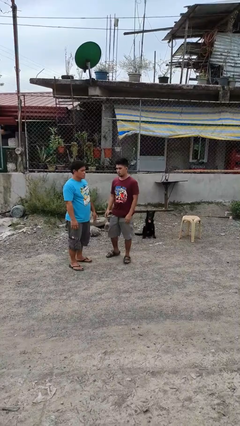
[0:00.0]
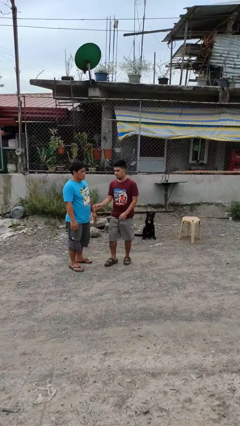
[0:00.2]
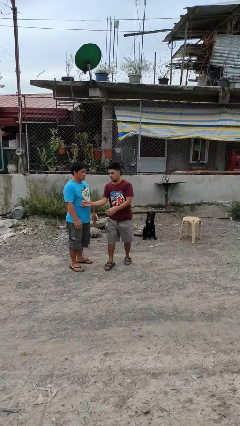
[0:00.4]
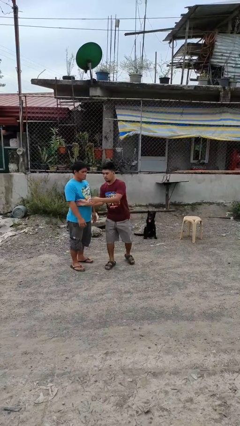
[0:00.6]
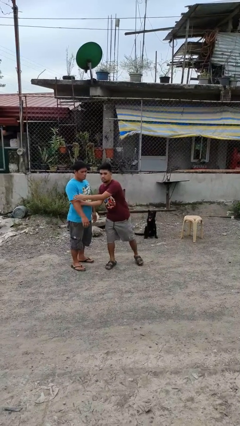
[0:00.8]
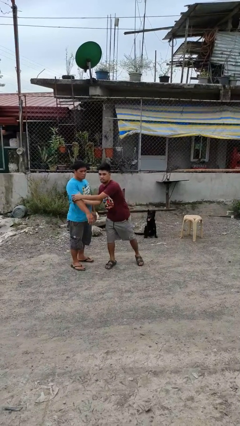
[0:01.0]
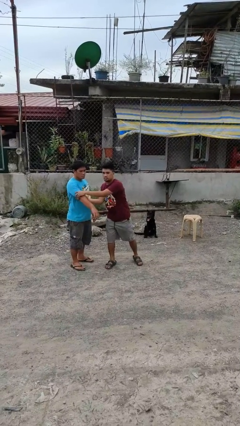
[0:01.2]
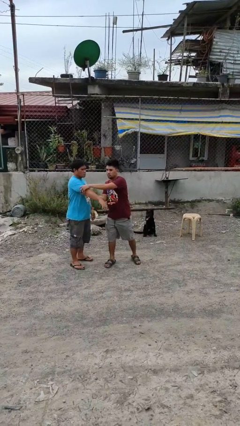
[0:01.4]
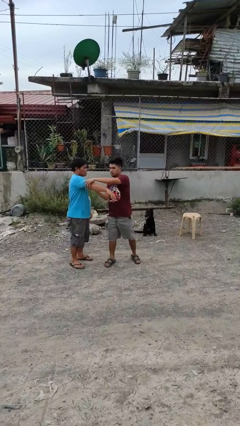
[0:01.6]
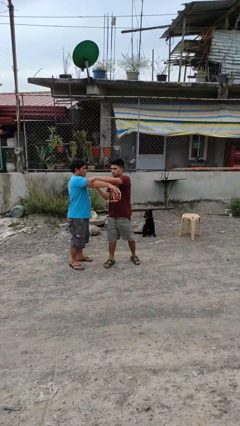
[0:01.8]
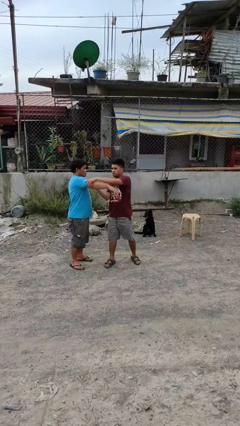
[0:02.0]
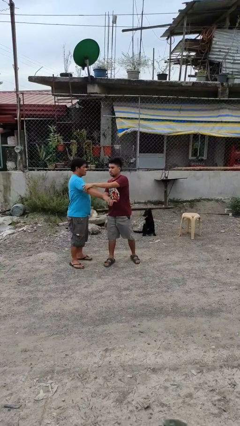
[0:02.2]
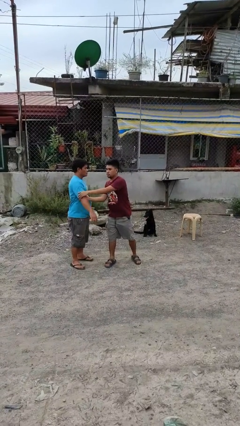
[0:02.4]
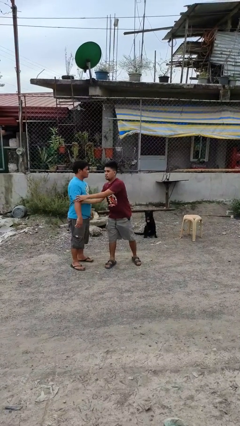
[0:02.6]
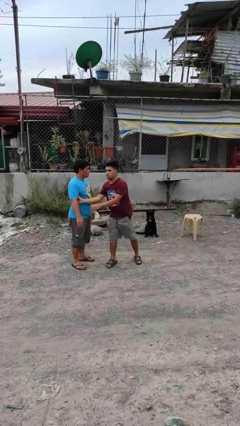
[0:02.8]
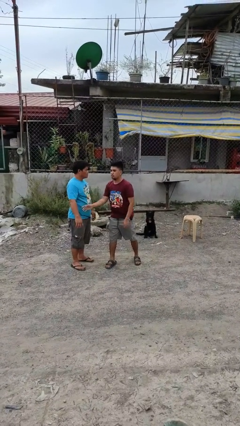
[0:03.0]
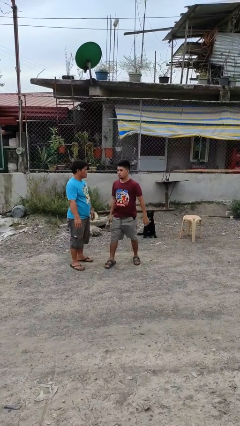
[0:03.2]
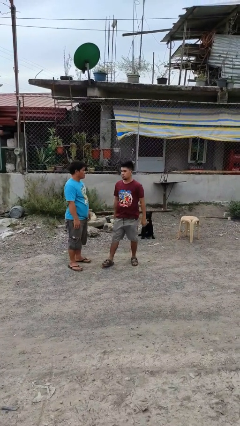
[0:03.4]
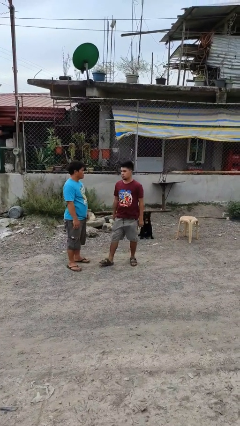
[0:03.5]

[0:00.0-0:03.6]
person grabs person by bicep

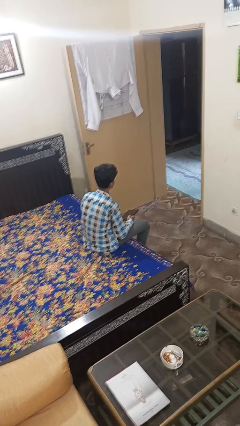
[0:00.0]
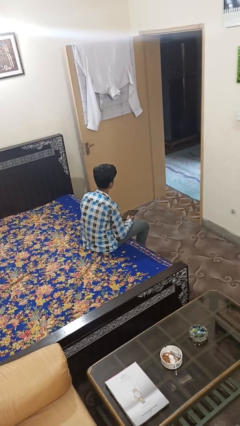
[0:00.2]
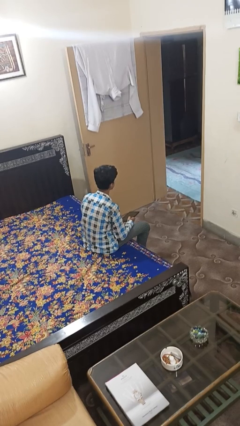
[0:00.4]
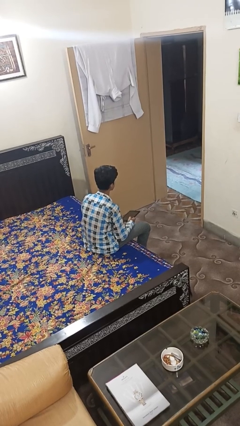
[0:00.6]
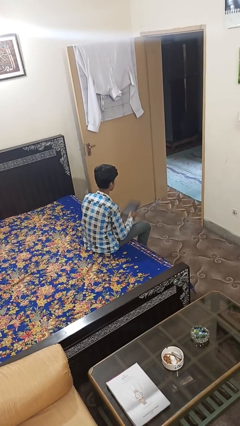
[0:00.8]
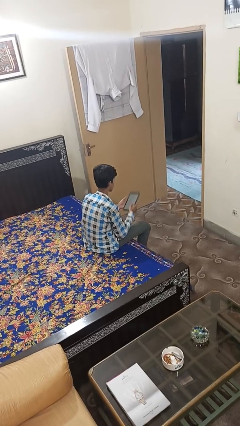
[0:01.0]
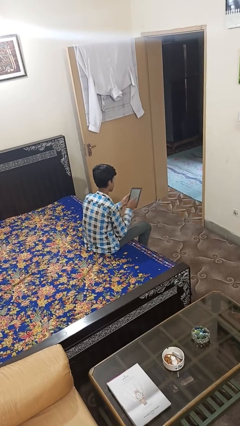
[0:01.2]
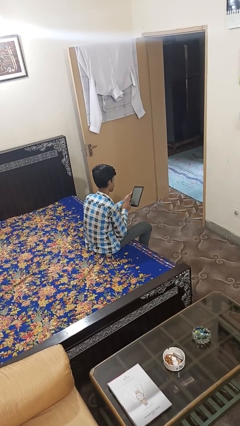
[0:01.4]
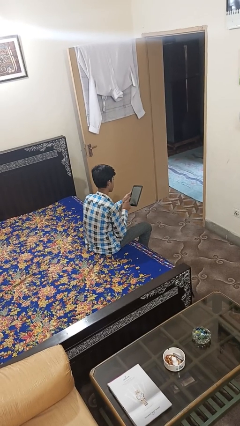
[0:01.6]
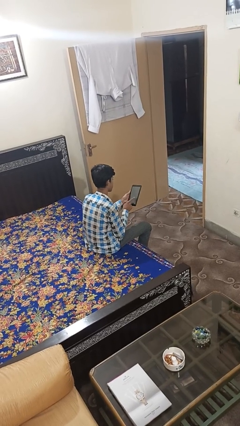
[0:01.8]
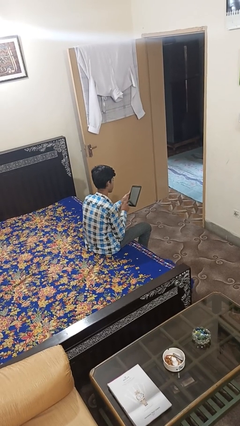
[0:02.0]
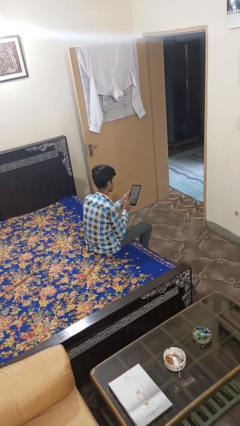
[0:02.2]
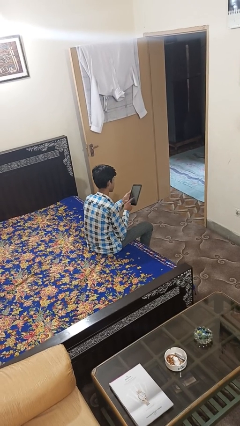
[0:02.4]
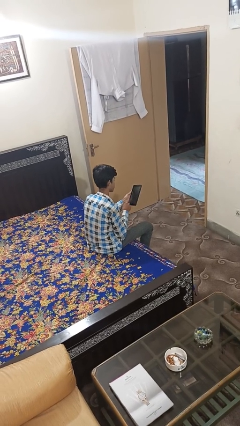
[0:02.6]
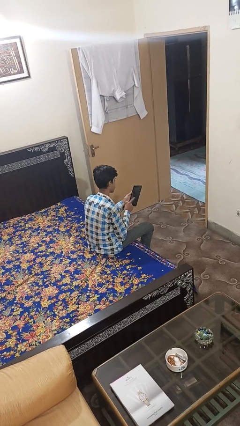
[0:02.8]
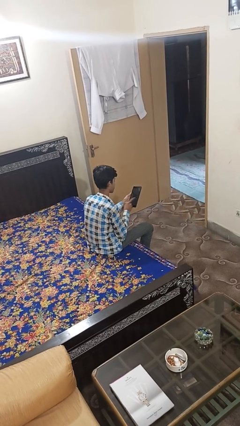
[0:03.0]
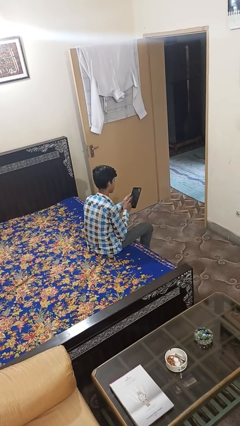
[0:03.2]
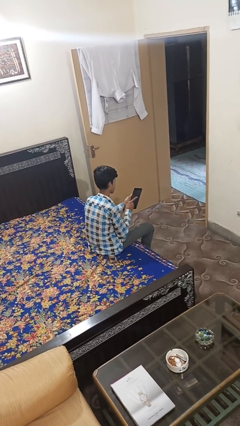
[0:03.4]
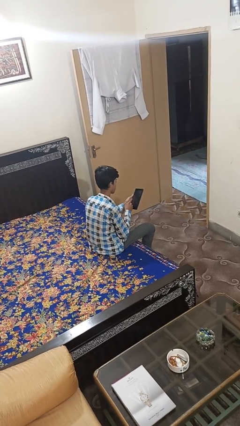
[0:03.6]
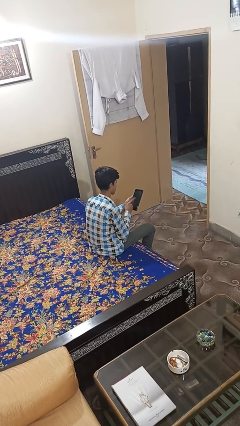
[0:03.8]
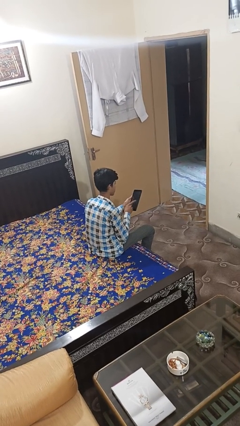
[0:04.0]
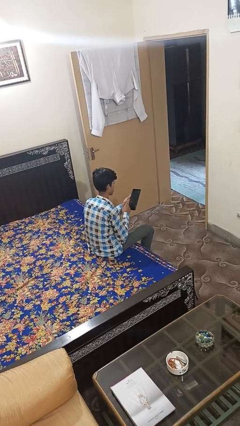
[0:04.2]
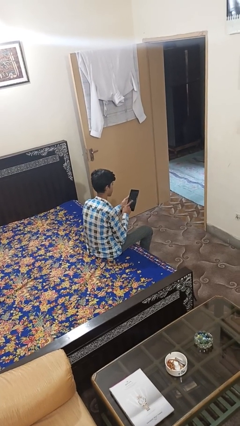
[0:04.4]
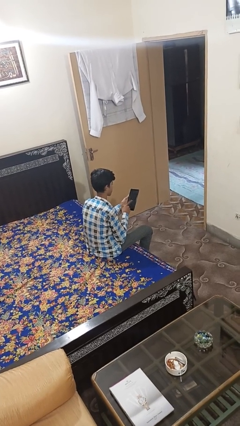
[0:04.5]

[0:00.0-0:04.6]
person interacts with tablet

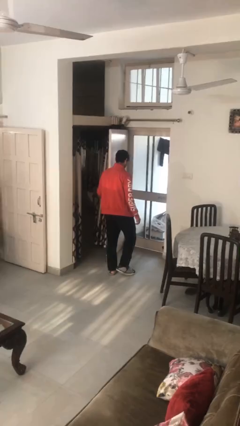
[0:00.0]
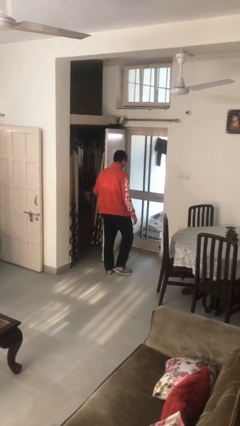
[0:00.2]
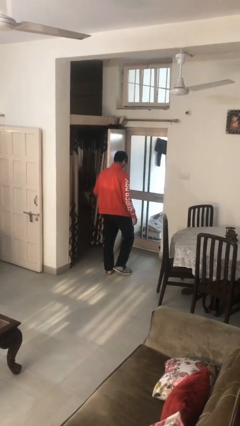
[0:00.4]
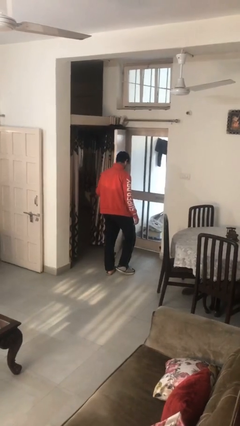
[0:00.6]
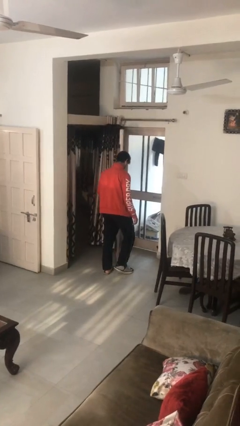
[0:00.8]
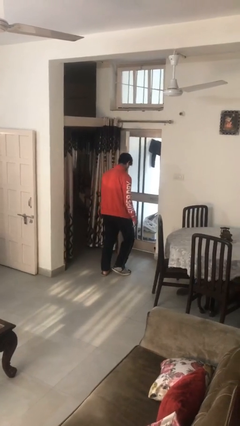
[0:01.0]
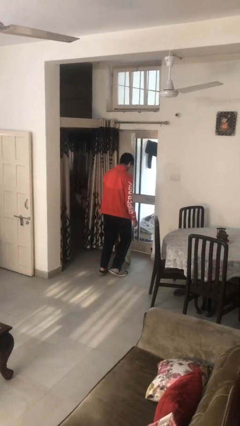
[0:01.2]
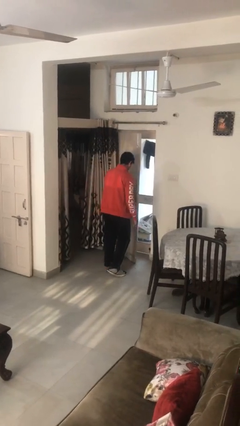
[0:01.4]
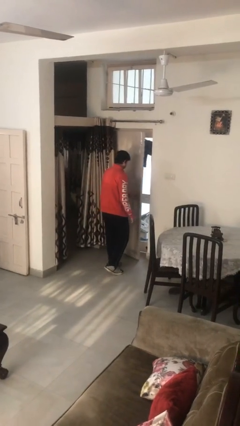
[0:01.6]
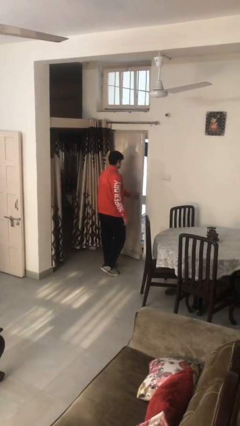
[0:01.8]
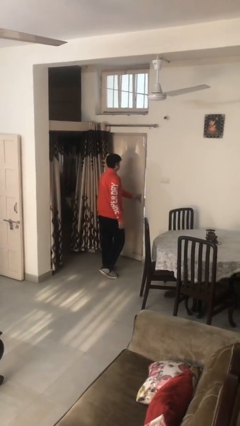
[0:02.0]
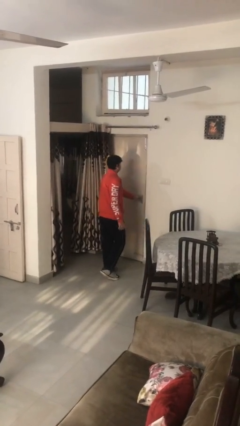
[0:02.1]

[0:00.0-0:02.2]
person closes facility door

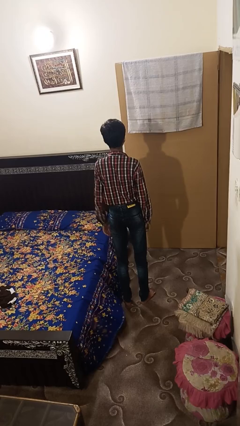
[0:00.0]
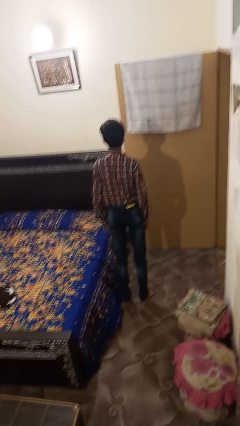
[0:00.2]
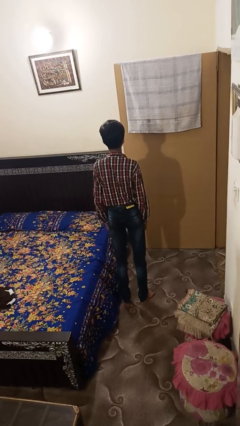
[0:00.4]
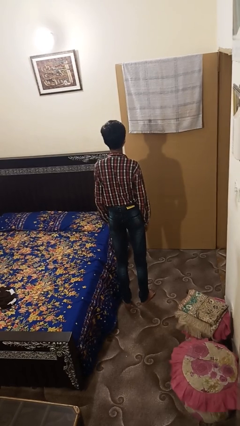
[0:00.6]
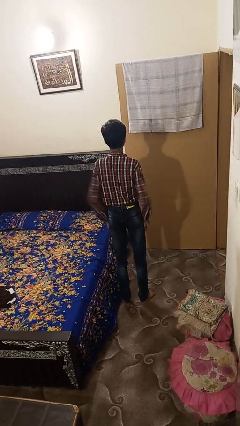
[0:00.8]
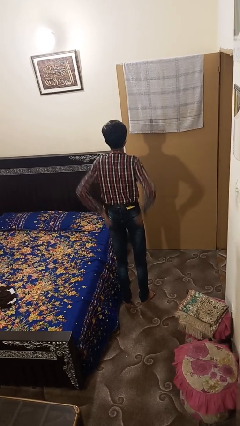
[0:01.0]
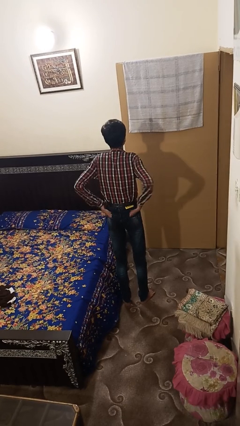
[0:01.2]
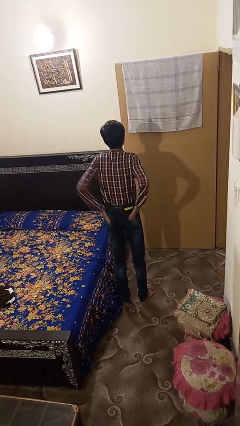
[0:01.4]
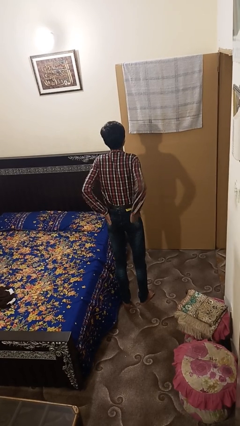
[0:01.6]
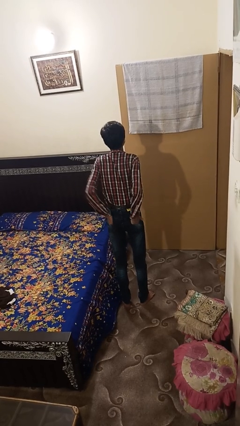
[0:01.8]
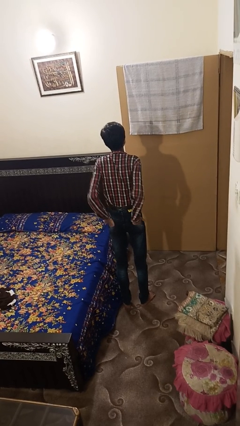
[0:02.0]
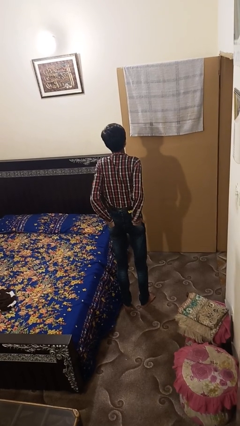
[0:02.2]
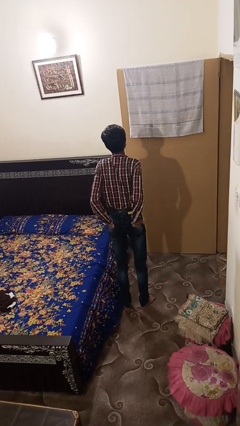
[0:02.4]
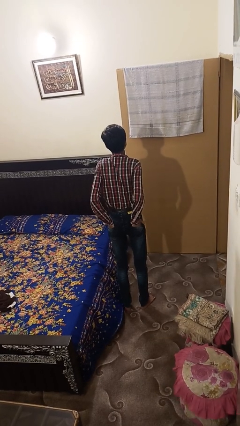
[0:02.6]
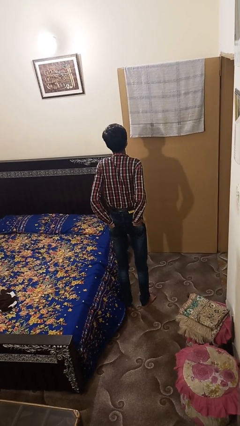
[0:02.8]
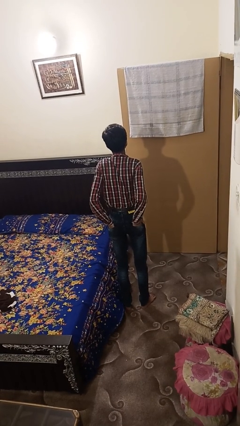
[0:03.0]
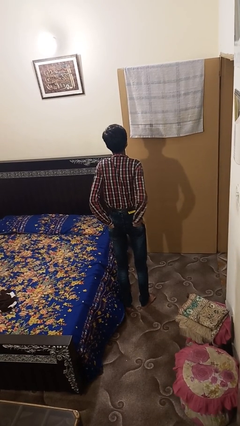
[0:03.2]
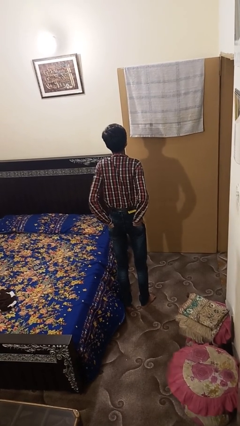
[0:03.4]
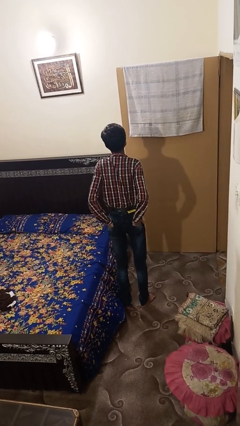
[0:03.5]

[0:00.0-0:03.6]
person puts hands in back pockets

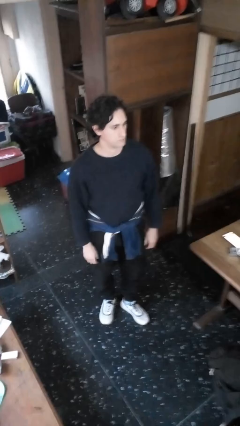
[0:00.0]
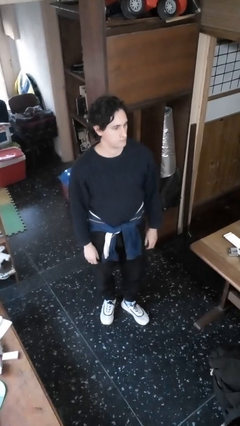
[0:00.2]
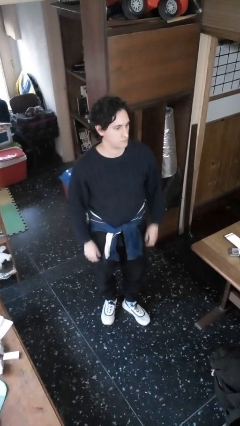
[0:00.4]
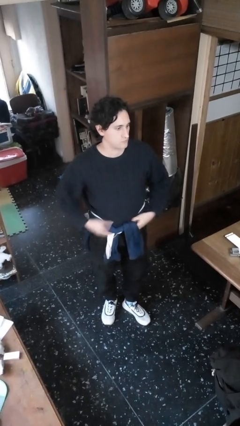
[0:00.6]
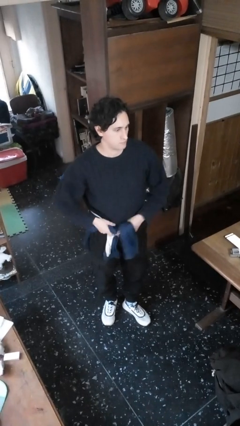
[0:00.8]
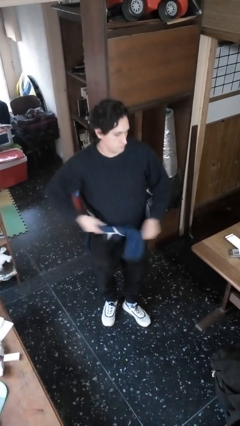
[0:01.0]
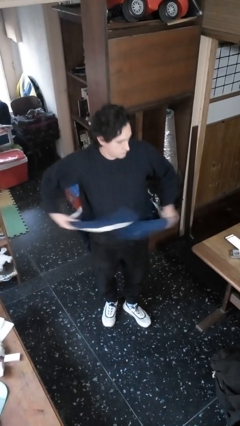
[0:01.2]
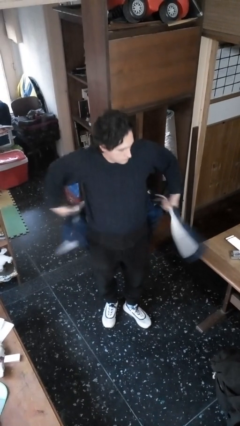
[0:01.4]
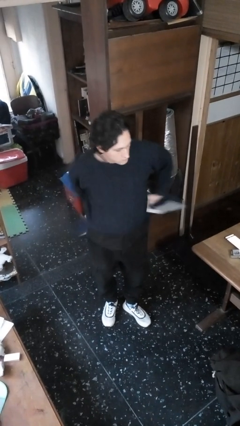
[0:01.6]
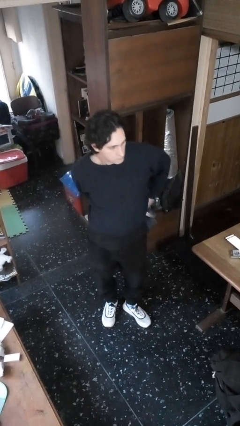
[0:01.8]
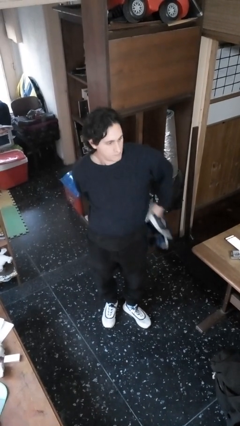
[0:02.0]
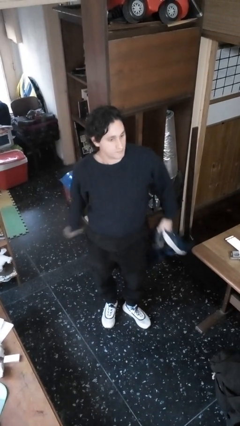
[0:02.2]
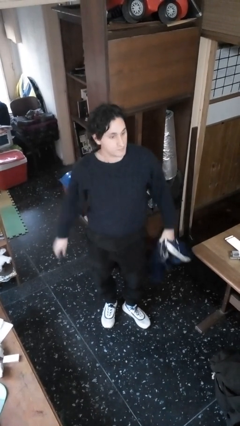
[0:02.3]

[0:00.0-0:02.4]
person unties jacket around waist

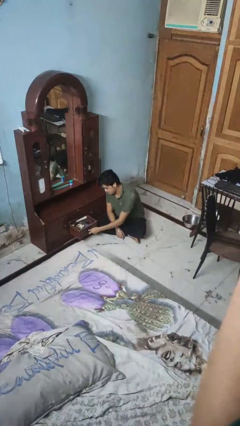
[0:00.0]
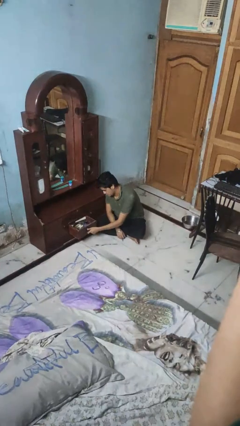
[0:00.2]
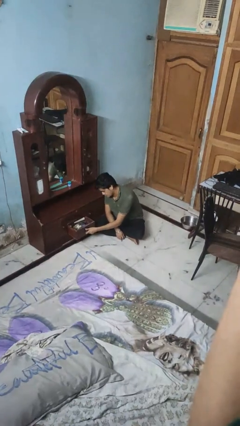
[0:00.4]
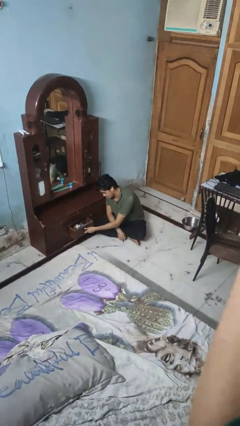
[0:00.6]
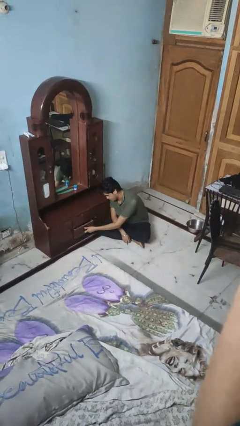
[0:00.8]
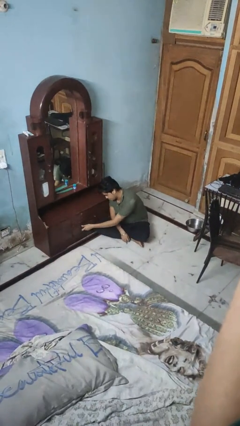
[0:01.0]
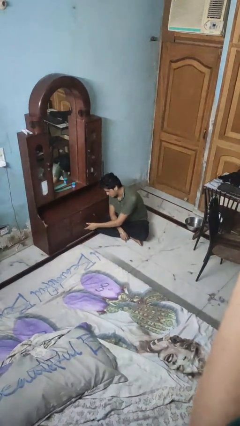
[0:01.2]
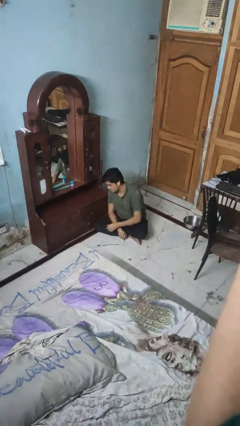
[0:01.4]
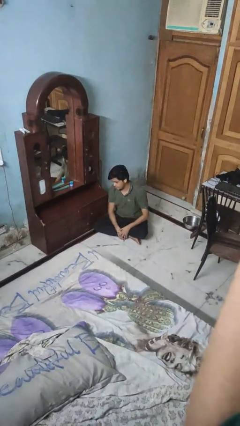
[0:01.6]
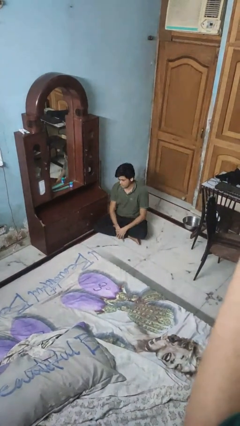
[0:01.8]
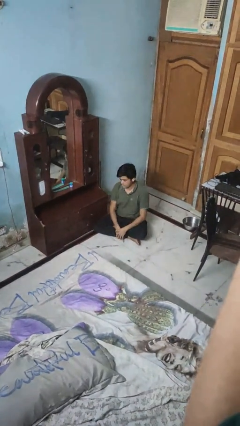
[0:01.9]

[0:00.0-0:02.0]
person closes dresser drawer
